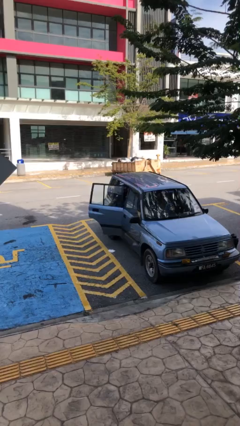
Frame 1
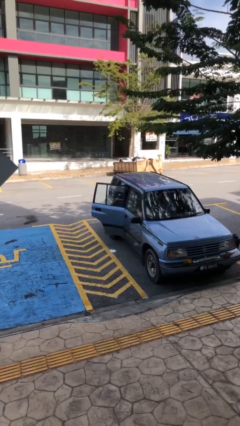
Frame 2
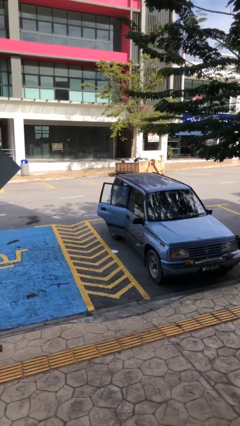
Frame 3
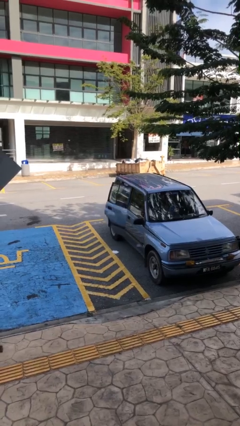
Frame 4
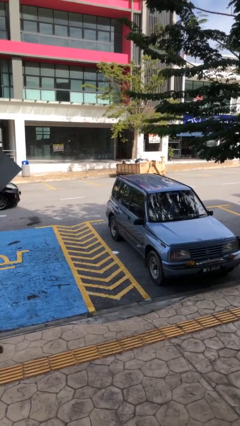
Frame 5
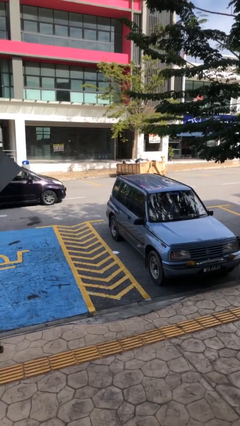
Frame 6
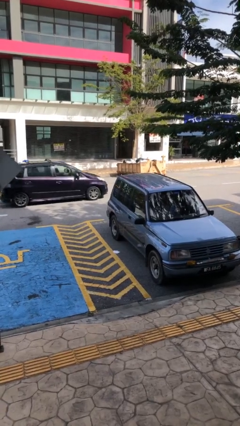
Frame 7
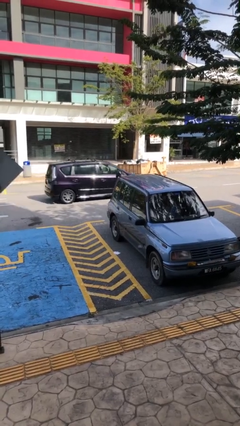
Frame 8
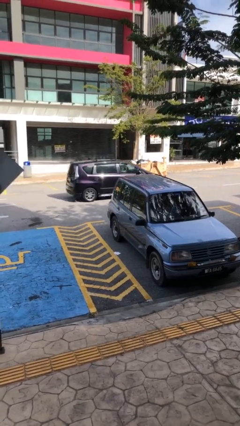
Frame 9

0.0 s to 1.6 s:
person closes car door

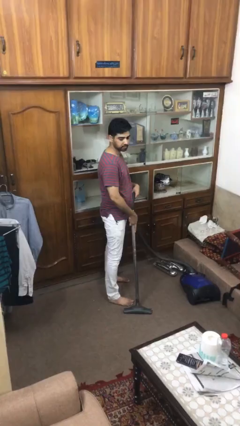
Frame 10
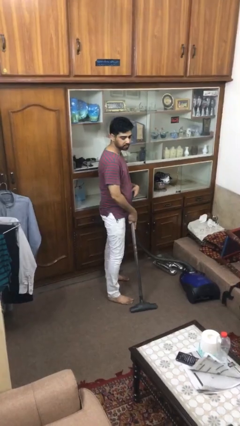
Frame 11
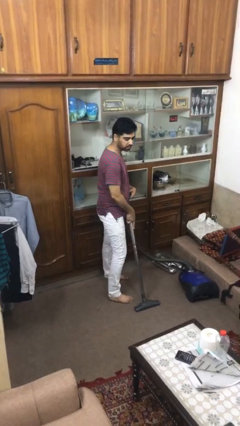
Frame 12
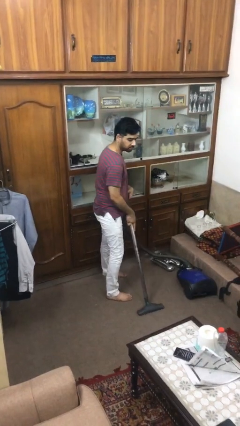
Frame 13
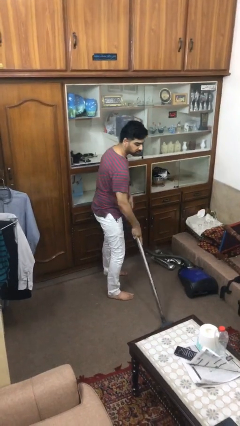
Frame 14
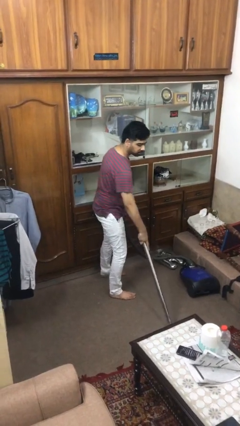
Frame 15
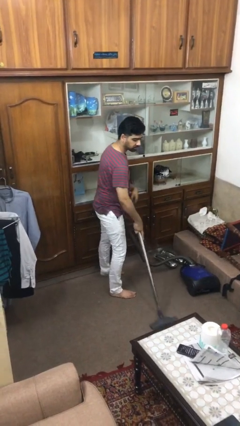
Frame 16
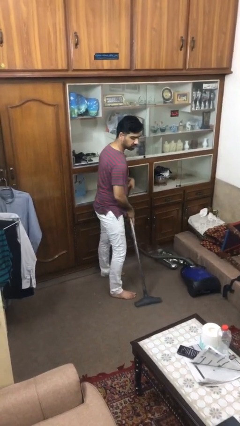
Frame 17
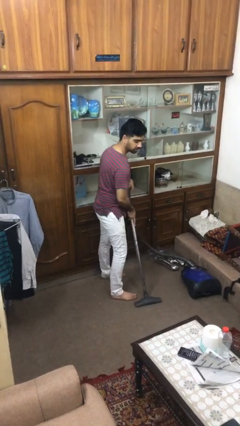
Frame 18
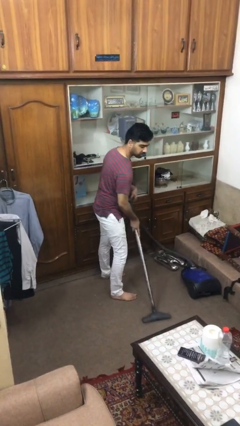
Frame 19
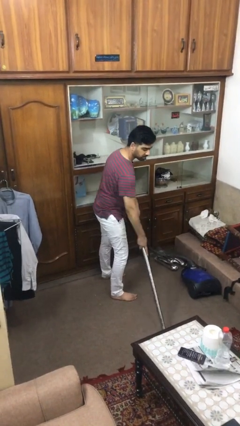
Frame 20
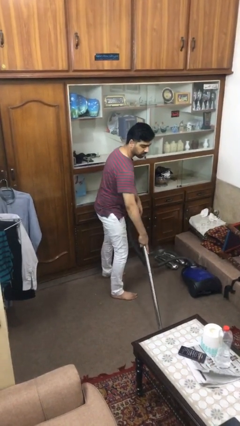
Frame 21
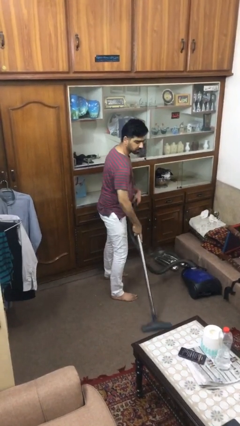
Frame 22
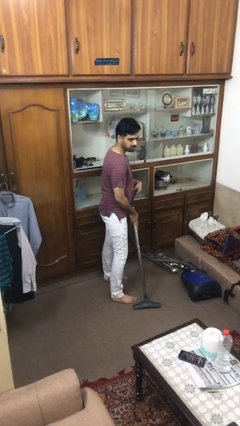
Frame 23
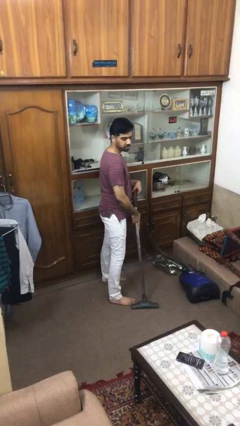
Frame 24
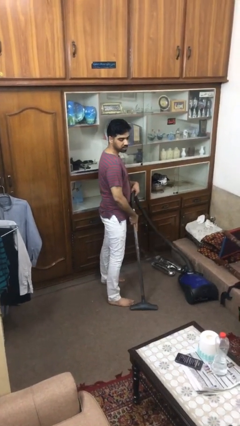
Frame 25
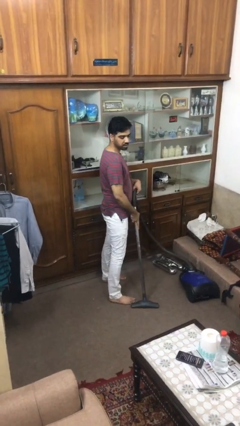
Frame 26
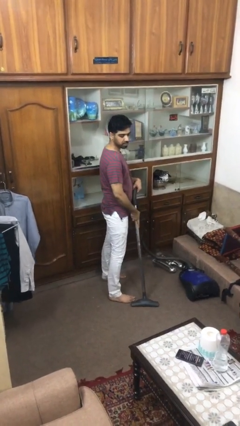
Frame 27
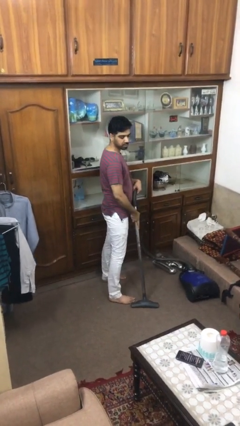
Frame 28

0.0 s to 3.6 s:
person vacuums carpet

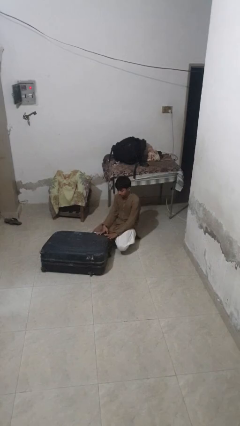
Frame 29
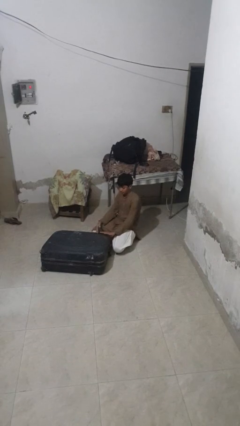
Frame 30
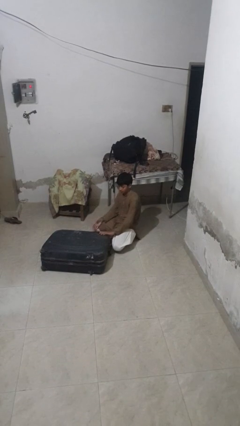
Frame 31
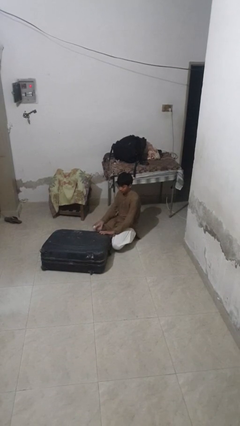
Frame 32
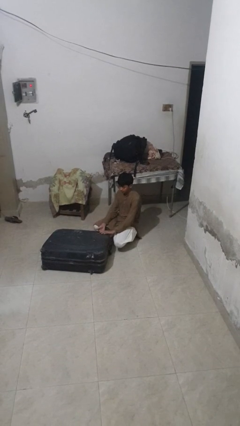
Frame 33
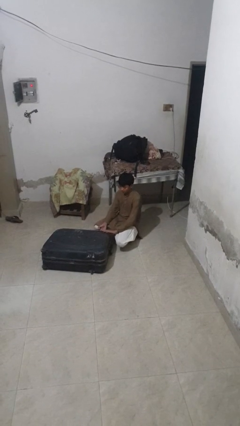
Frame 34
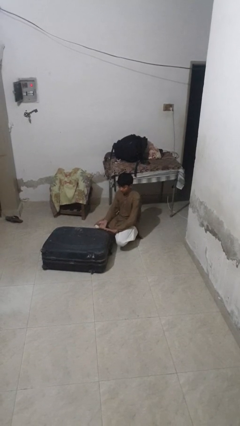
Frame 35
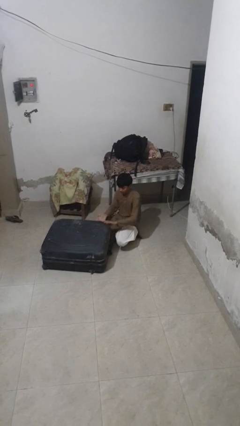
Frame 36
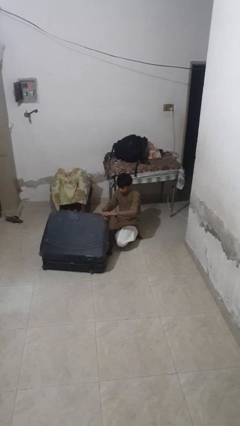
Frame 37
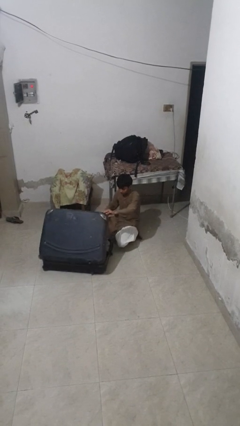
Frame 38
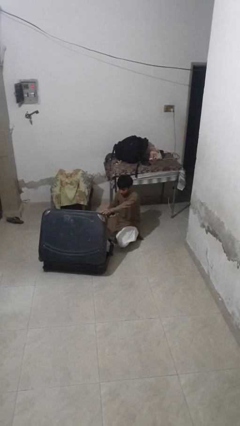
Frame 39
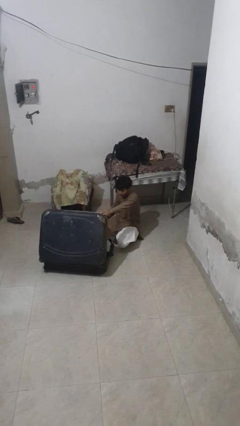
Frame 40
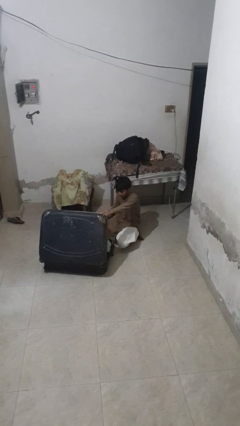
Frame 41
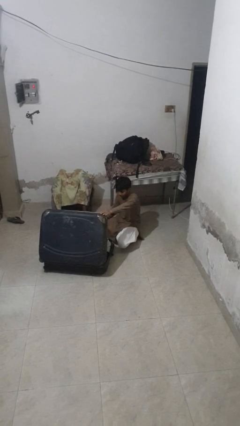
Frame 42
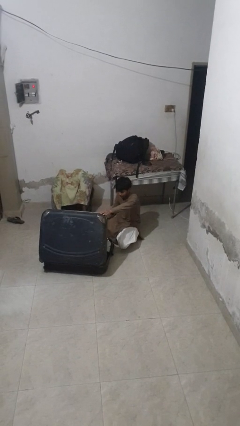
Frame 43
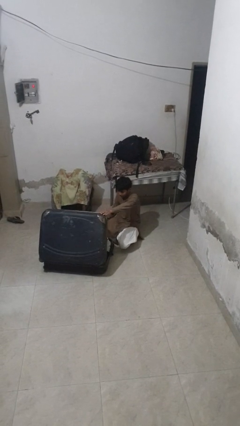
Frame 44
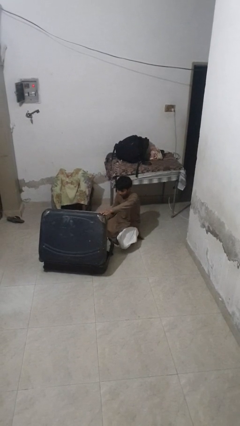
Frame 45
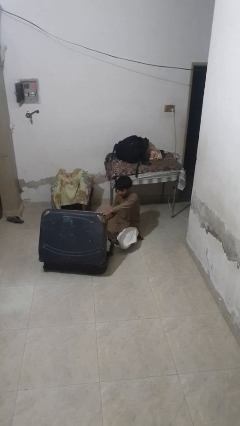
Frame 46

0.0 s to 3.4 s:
person opens suitcase

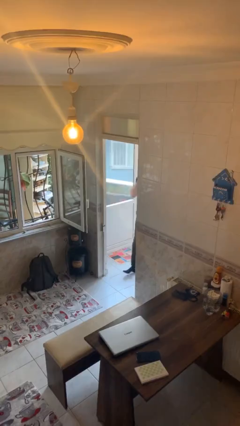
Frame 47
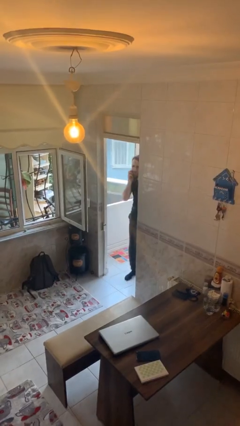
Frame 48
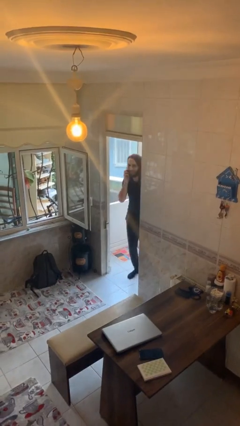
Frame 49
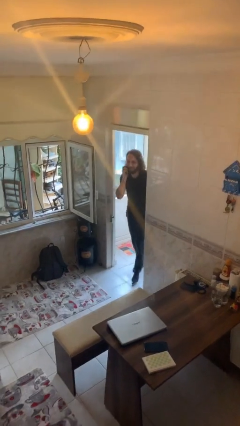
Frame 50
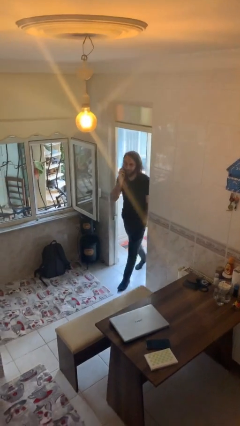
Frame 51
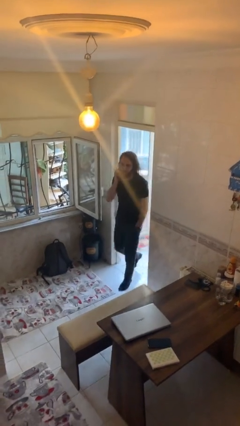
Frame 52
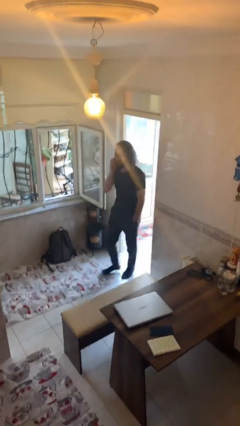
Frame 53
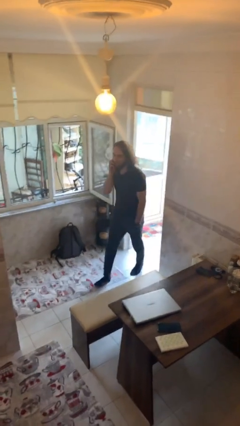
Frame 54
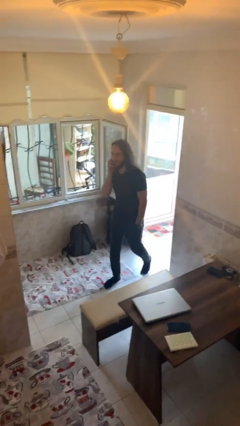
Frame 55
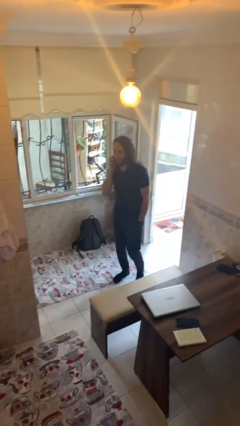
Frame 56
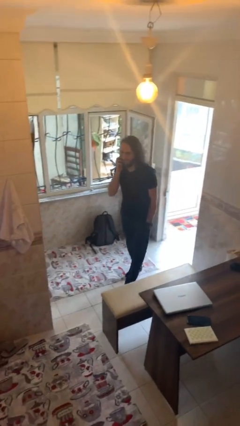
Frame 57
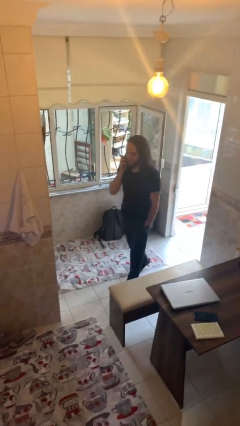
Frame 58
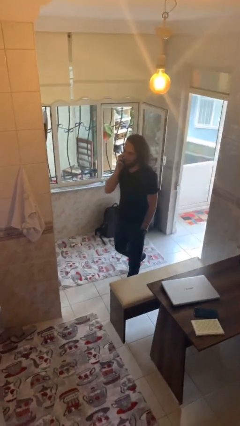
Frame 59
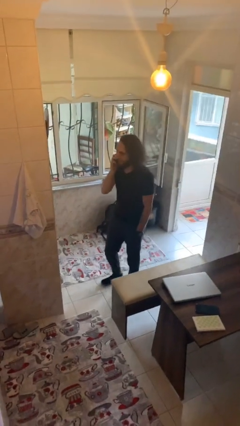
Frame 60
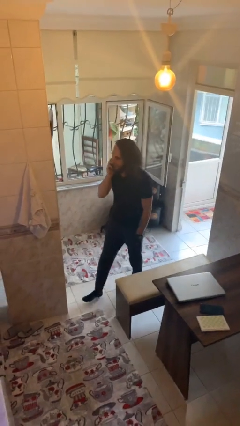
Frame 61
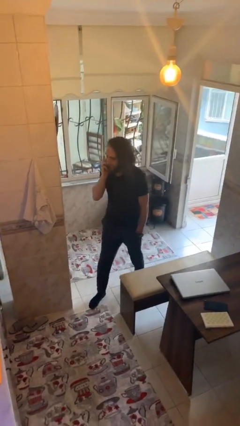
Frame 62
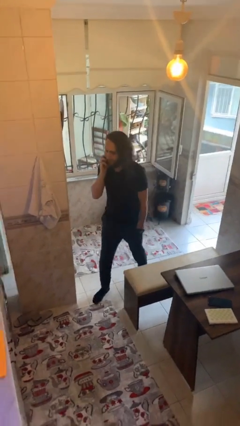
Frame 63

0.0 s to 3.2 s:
person enters scene through structure

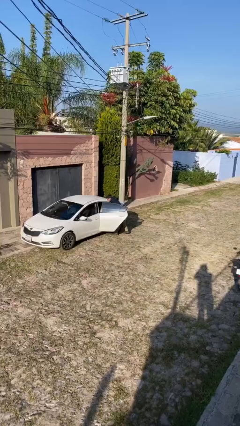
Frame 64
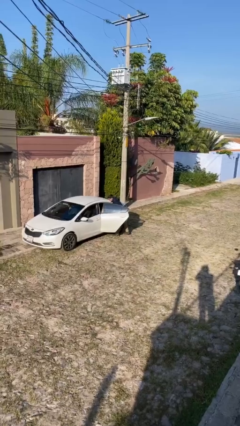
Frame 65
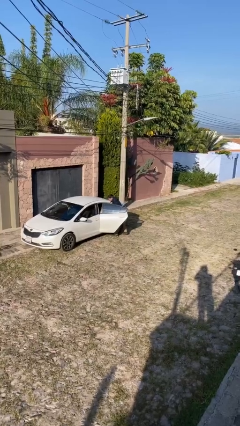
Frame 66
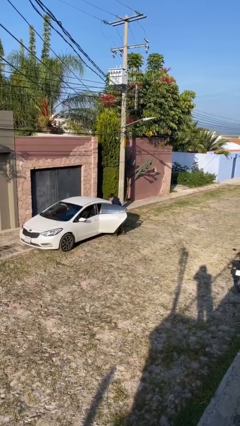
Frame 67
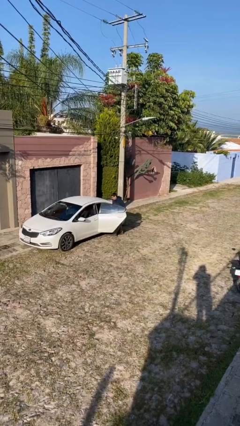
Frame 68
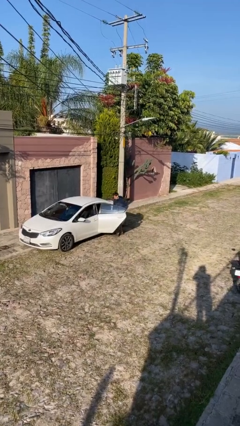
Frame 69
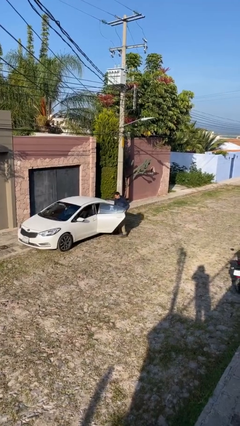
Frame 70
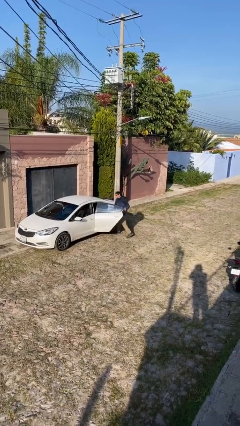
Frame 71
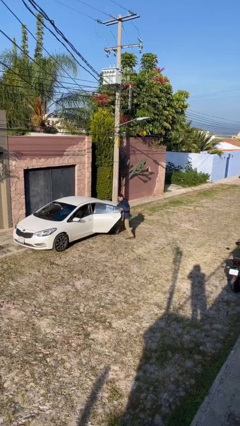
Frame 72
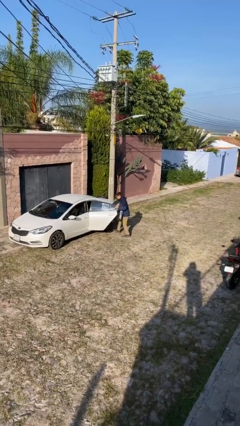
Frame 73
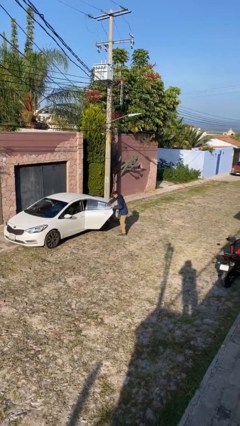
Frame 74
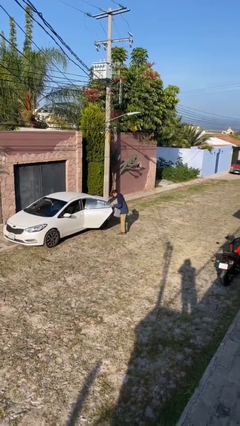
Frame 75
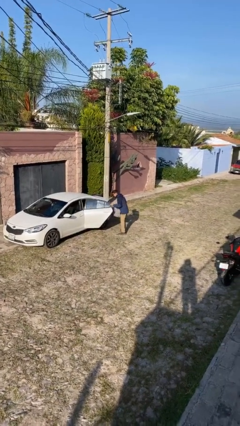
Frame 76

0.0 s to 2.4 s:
person unloads car

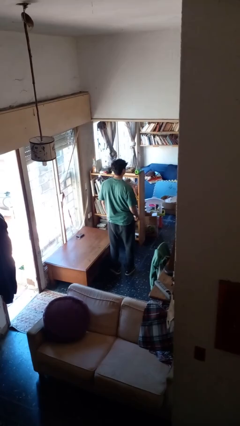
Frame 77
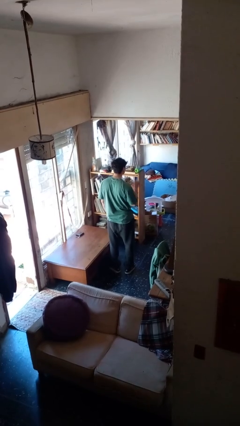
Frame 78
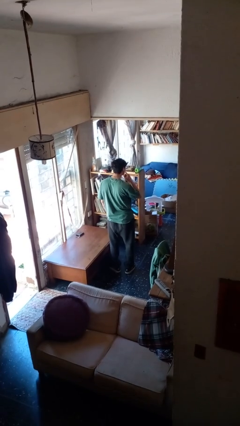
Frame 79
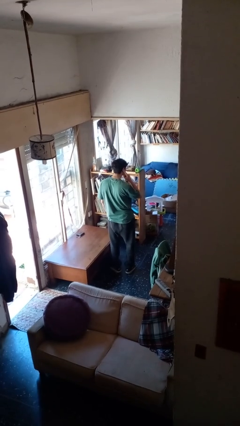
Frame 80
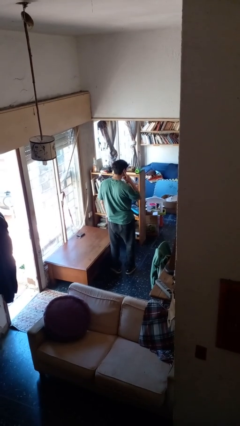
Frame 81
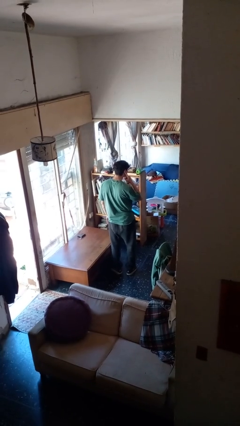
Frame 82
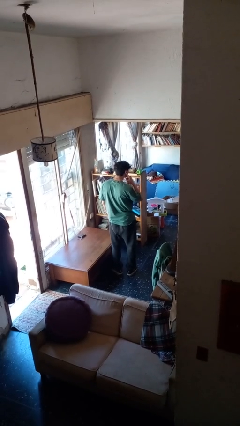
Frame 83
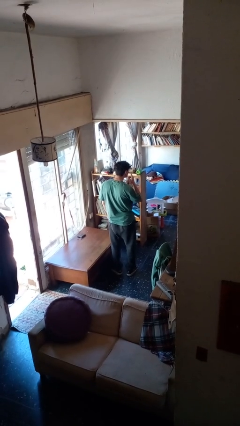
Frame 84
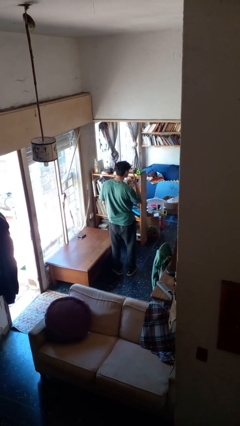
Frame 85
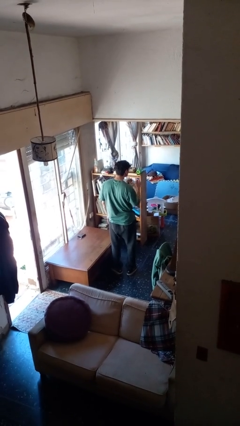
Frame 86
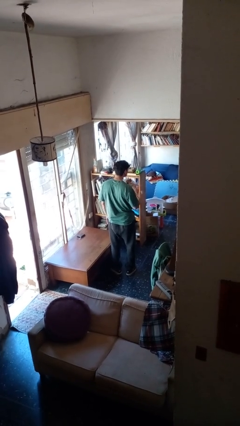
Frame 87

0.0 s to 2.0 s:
person gestures listen closely

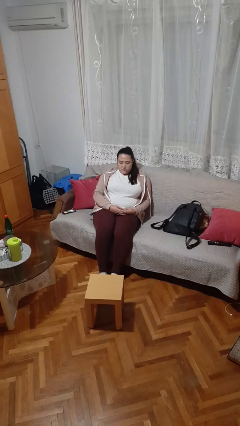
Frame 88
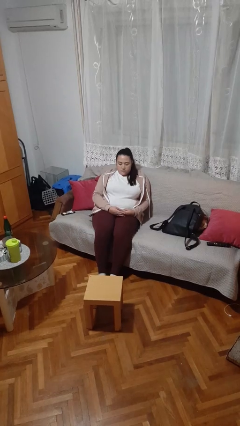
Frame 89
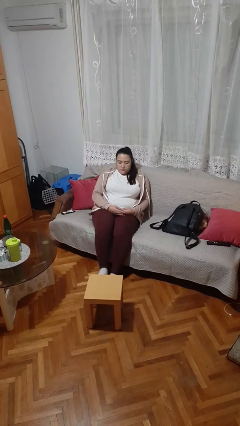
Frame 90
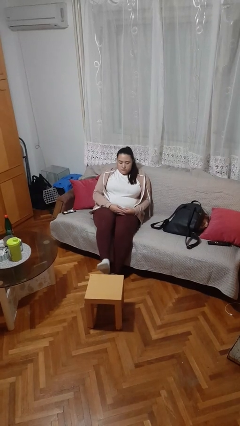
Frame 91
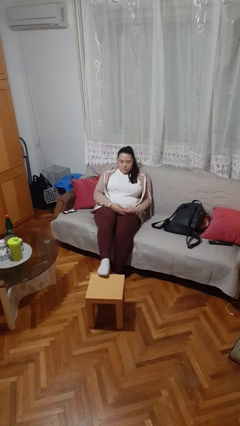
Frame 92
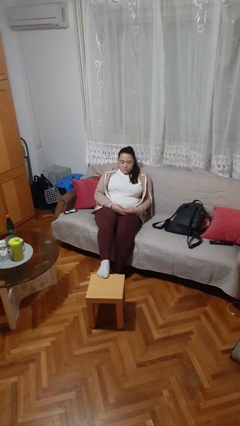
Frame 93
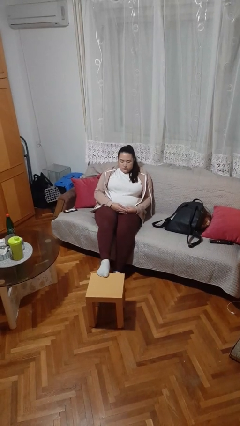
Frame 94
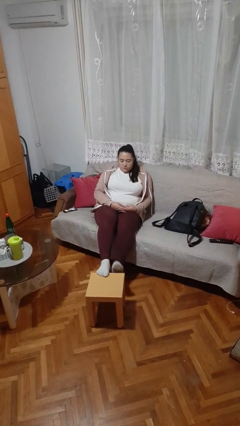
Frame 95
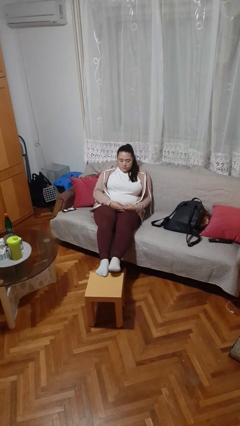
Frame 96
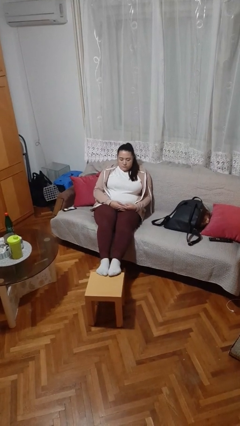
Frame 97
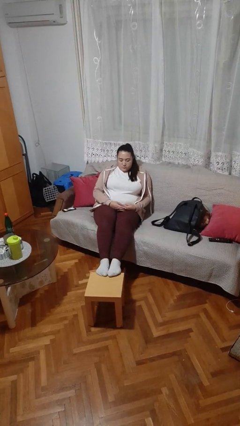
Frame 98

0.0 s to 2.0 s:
person puts feet up
